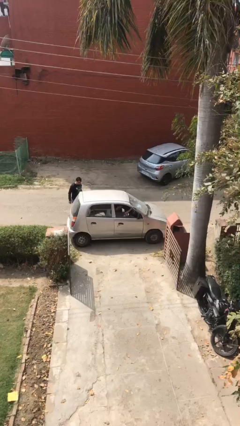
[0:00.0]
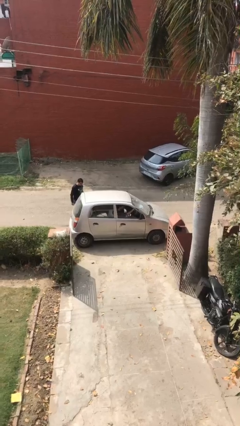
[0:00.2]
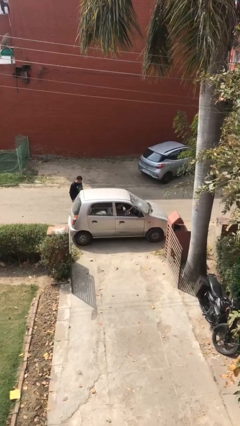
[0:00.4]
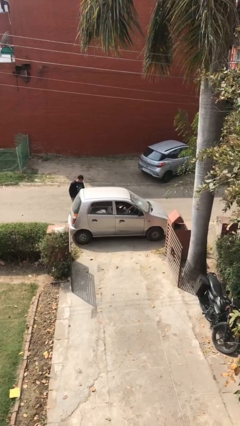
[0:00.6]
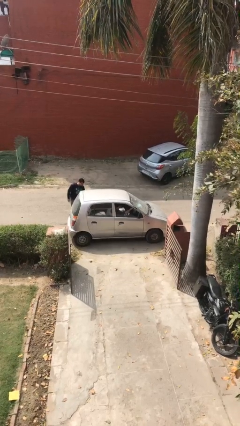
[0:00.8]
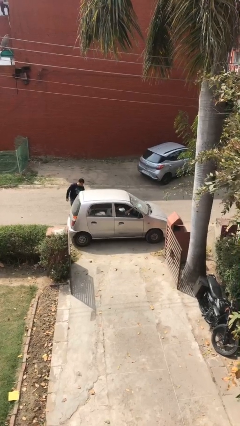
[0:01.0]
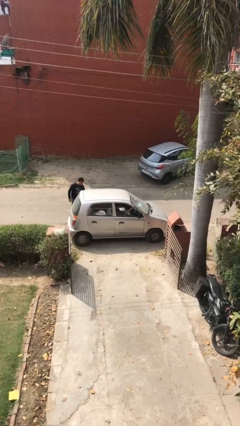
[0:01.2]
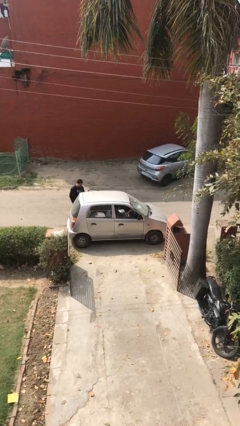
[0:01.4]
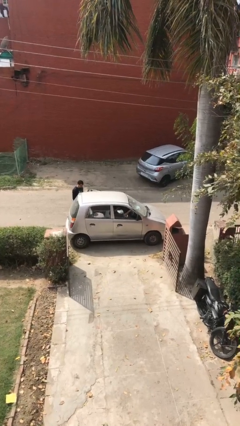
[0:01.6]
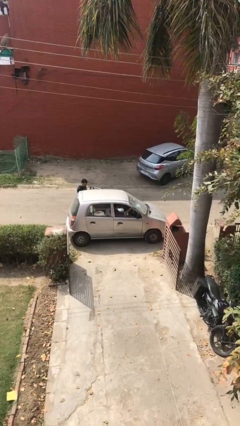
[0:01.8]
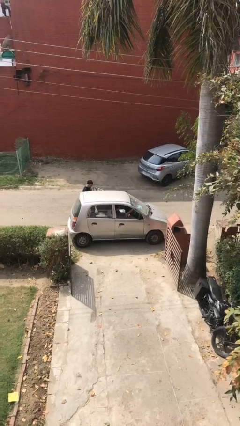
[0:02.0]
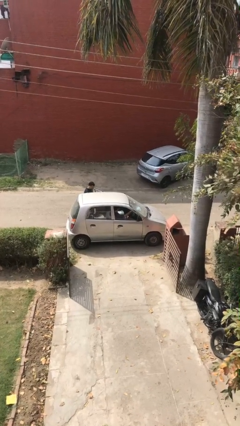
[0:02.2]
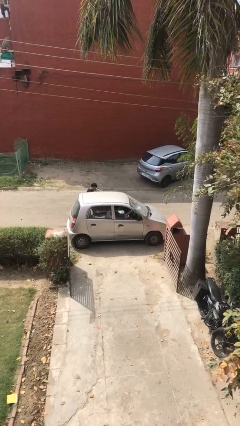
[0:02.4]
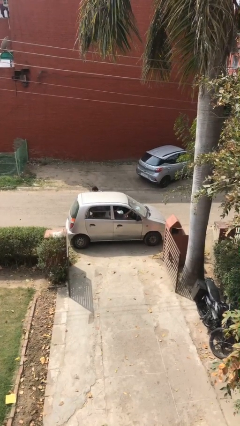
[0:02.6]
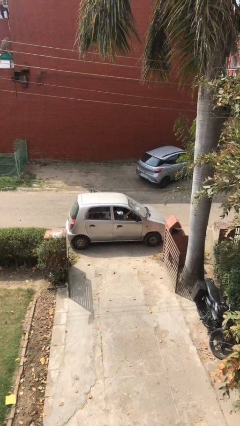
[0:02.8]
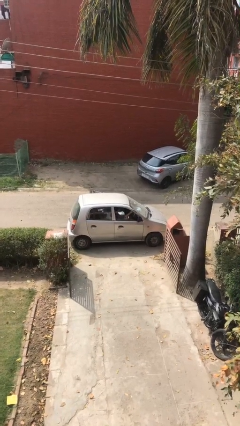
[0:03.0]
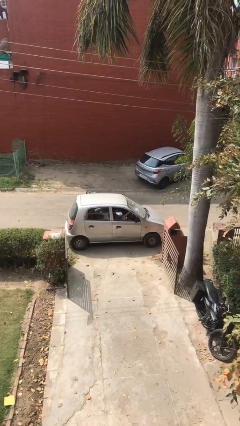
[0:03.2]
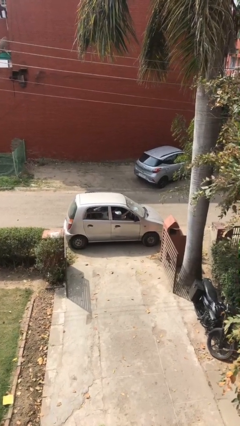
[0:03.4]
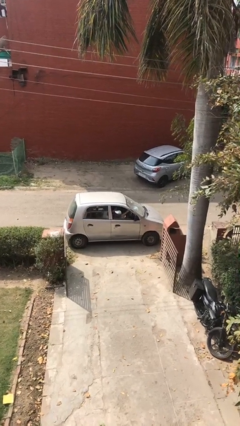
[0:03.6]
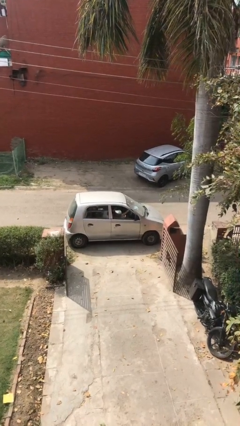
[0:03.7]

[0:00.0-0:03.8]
car picks up person

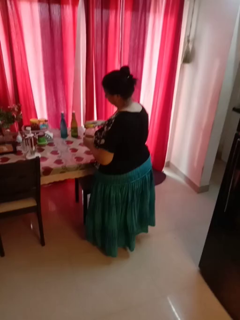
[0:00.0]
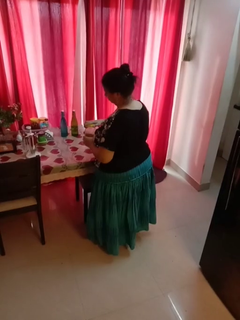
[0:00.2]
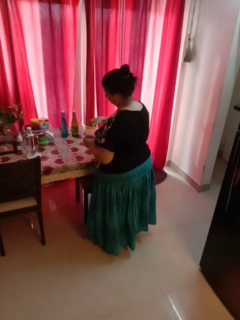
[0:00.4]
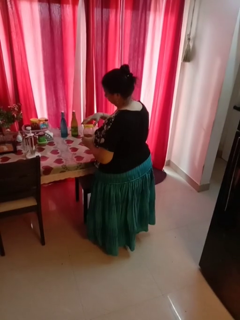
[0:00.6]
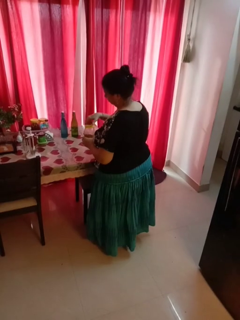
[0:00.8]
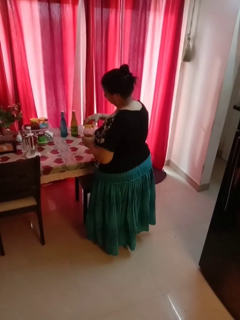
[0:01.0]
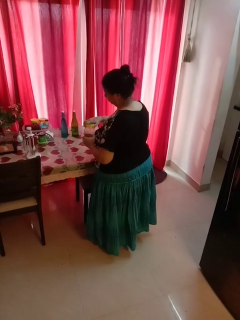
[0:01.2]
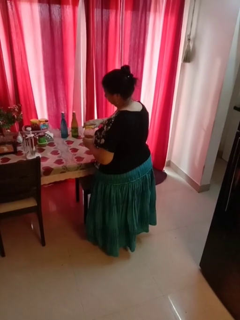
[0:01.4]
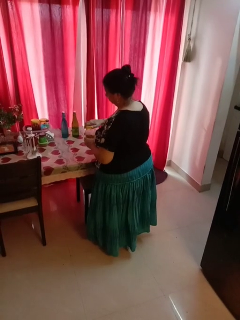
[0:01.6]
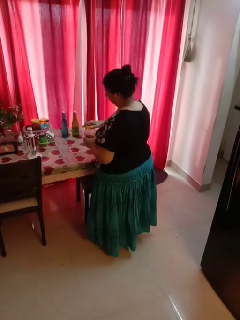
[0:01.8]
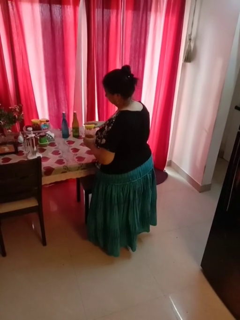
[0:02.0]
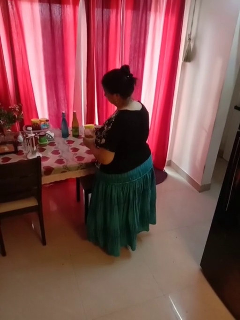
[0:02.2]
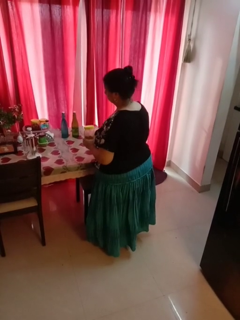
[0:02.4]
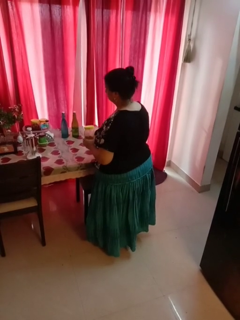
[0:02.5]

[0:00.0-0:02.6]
person closes jar

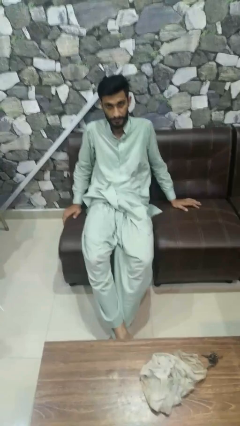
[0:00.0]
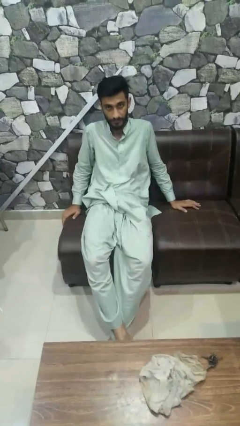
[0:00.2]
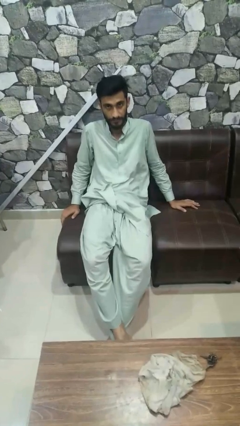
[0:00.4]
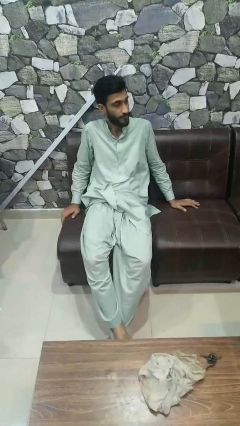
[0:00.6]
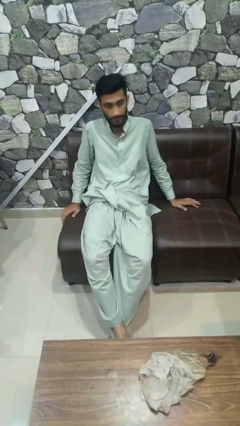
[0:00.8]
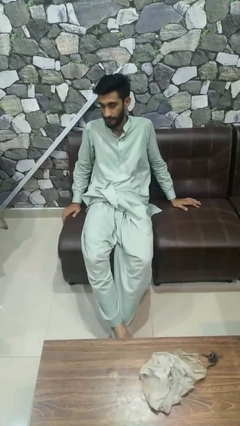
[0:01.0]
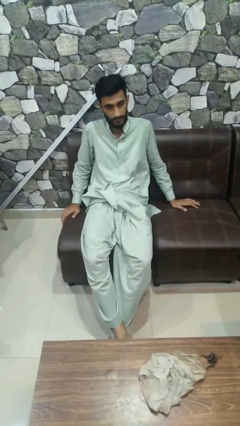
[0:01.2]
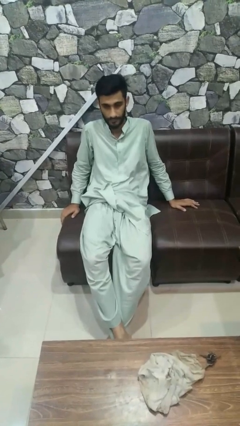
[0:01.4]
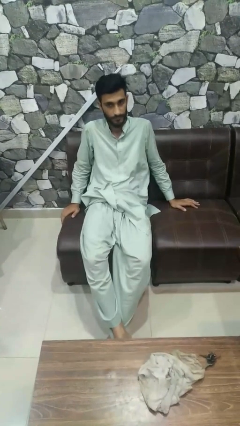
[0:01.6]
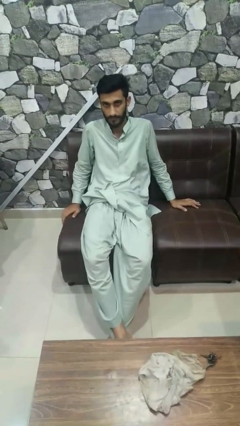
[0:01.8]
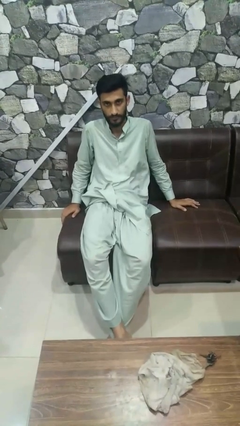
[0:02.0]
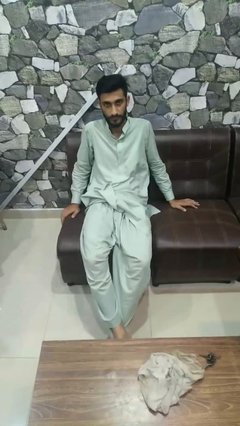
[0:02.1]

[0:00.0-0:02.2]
person shakes head

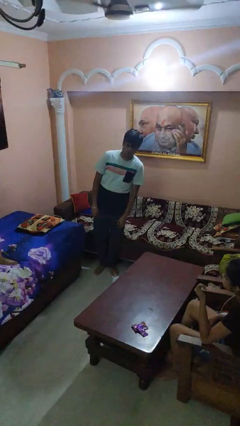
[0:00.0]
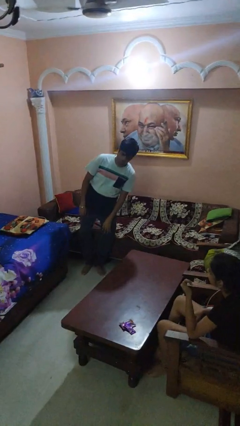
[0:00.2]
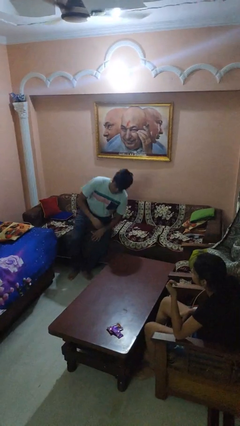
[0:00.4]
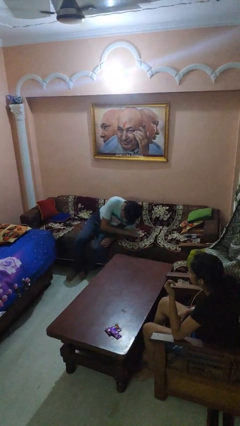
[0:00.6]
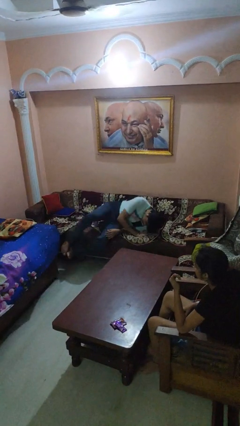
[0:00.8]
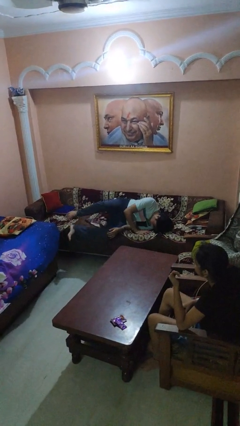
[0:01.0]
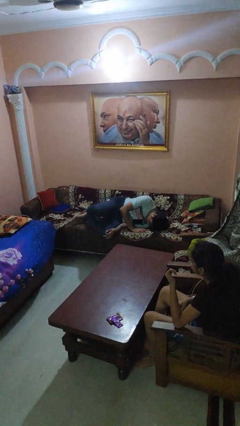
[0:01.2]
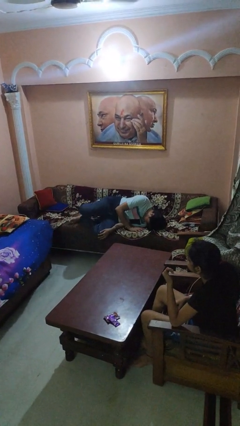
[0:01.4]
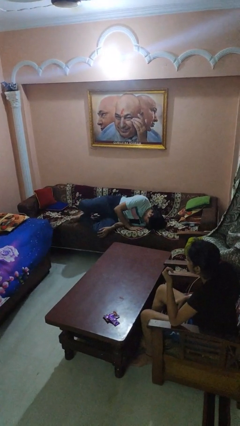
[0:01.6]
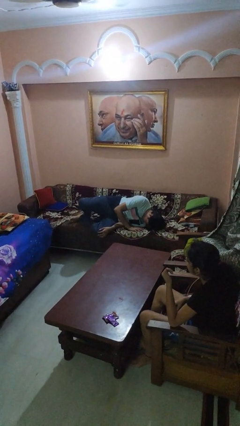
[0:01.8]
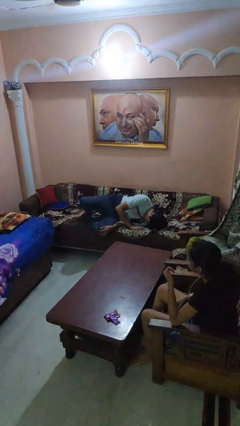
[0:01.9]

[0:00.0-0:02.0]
person lies down on couch

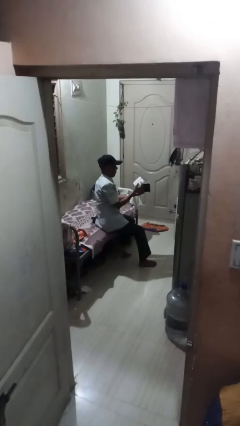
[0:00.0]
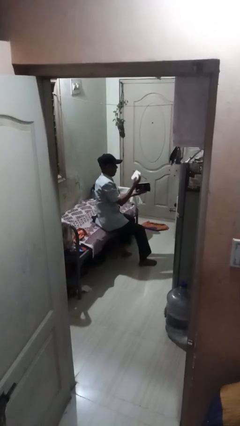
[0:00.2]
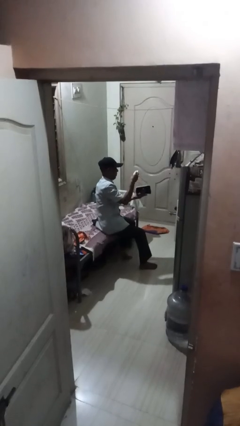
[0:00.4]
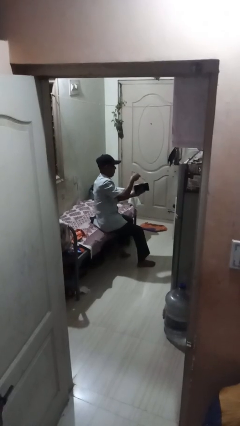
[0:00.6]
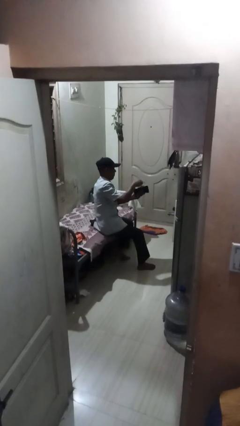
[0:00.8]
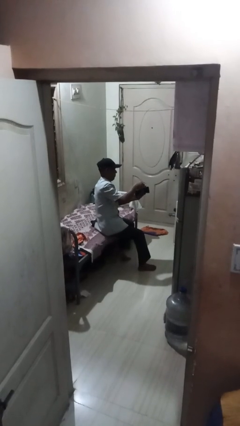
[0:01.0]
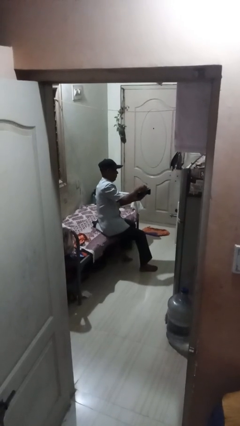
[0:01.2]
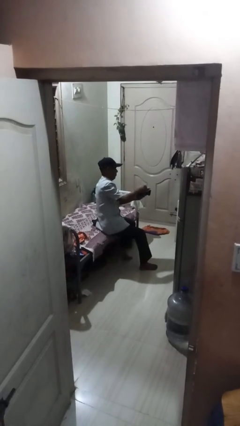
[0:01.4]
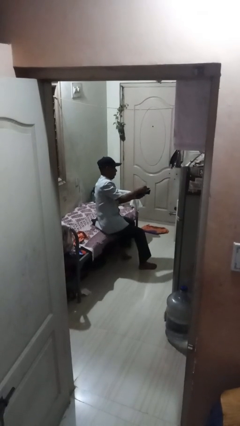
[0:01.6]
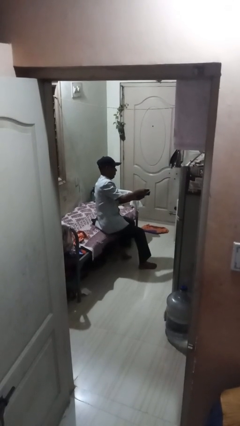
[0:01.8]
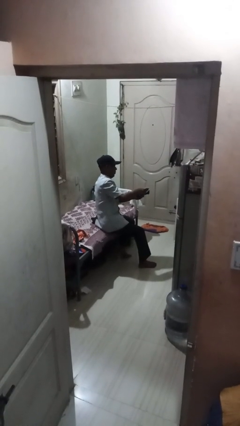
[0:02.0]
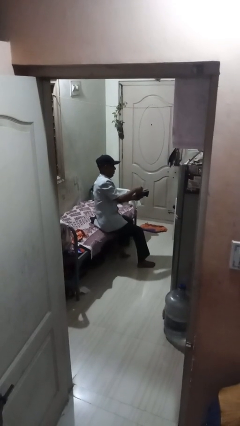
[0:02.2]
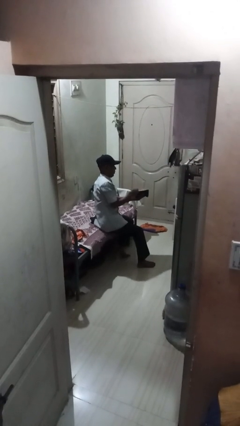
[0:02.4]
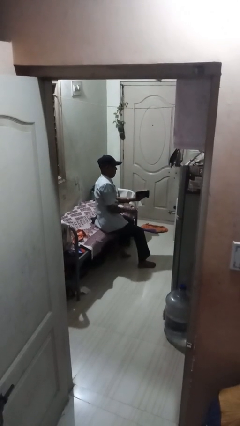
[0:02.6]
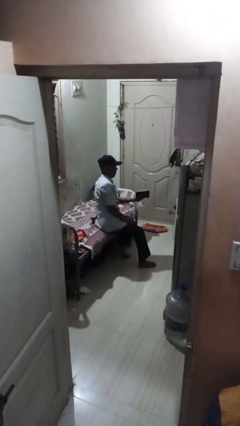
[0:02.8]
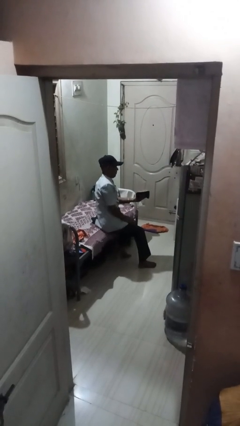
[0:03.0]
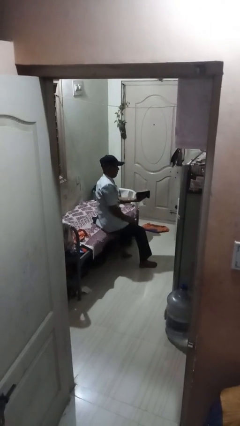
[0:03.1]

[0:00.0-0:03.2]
person puts object into purse

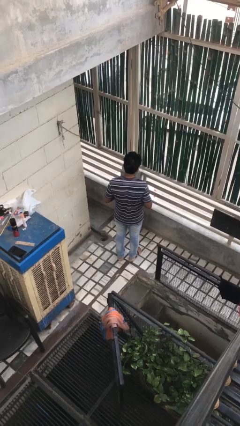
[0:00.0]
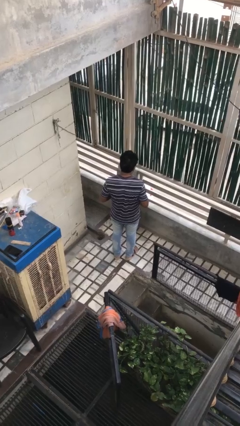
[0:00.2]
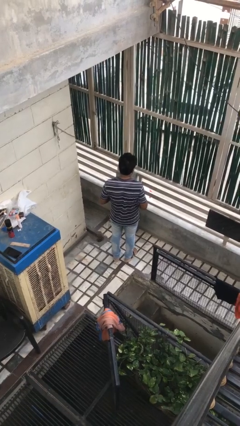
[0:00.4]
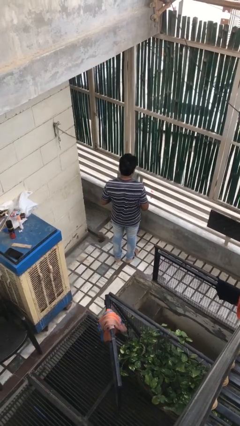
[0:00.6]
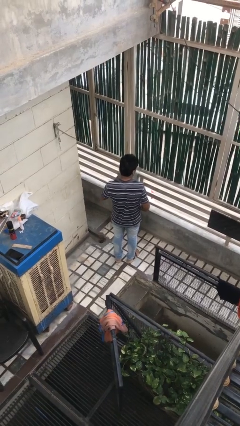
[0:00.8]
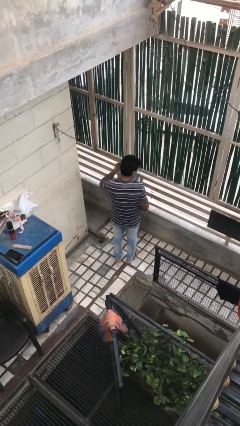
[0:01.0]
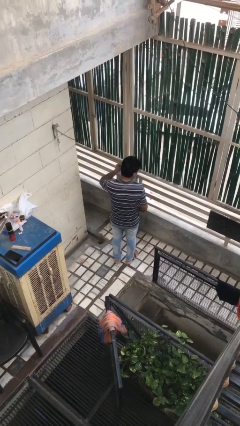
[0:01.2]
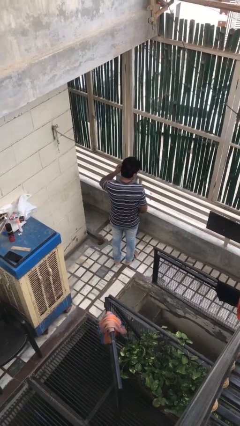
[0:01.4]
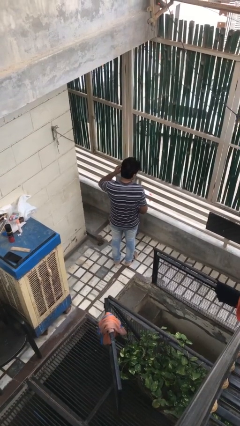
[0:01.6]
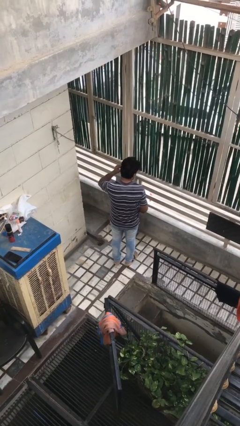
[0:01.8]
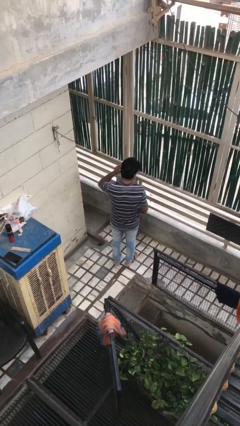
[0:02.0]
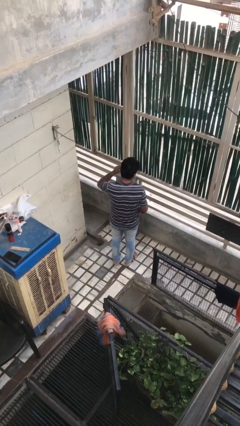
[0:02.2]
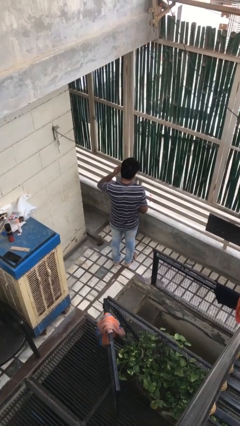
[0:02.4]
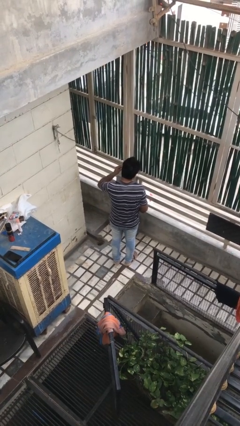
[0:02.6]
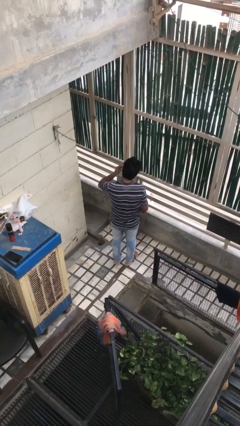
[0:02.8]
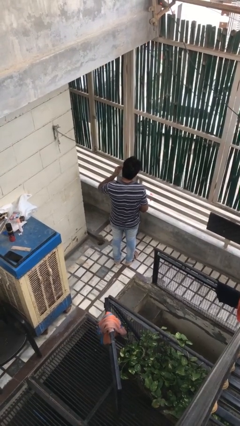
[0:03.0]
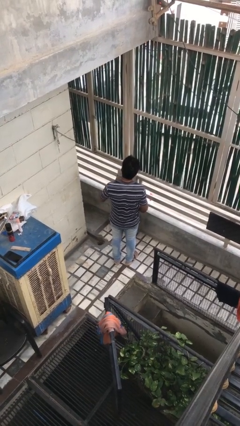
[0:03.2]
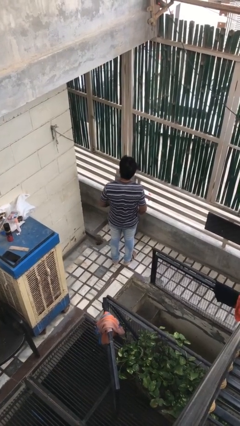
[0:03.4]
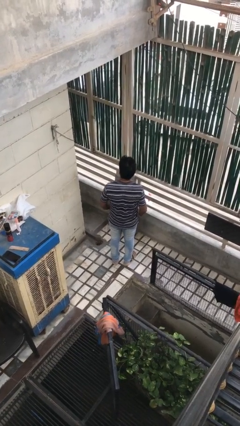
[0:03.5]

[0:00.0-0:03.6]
person puts on earrings

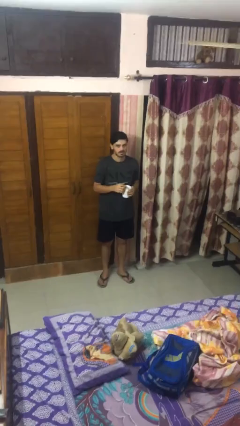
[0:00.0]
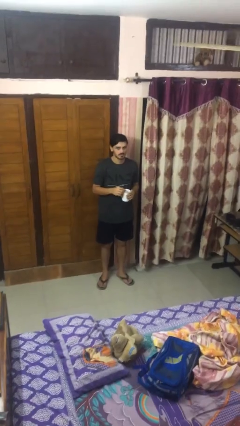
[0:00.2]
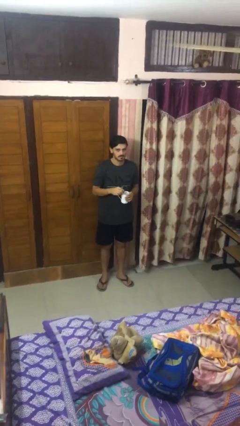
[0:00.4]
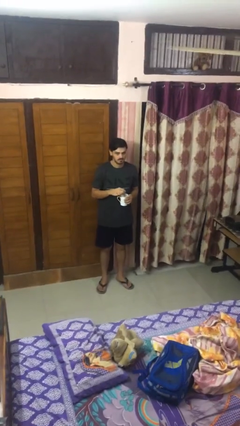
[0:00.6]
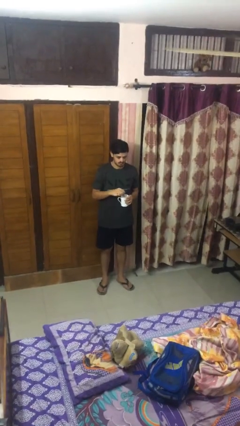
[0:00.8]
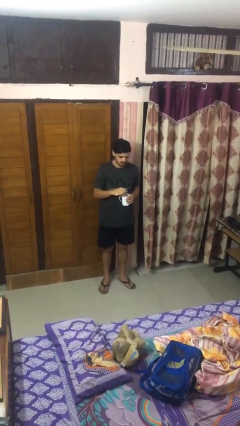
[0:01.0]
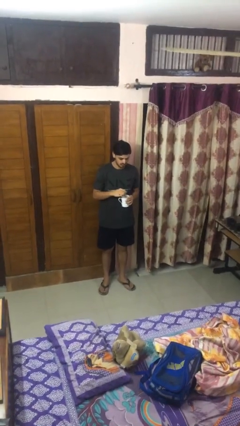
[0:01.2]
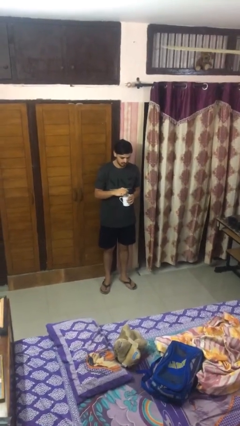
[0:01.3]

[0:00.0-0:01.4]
person stirs mug
